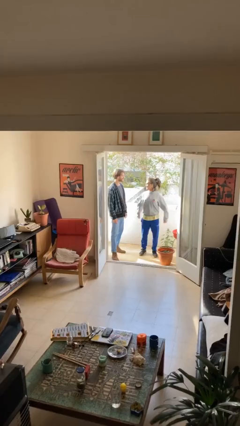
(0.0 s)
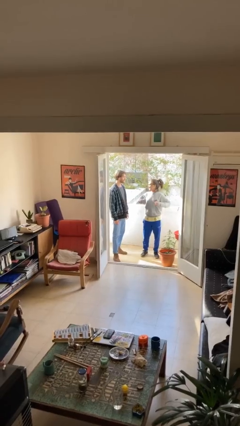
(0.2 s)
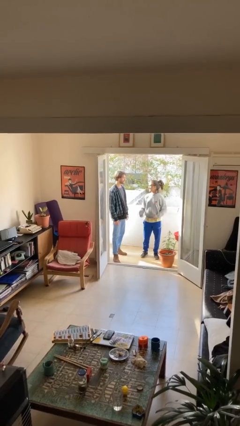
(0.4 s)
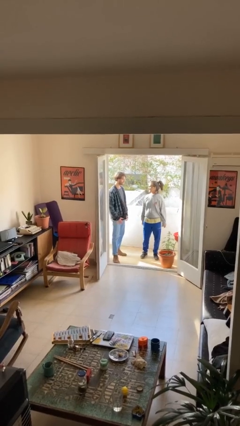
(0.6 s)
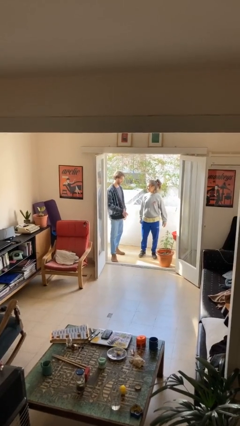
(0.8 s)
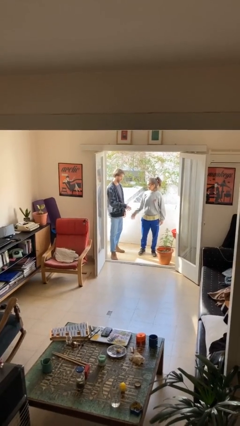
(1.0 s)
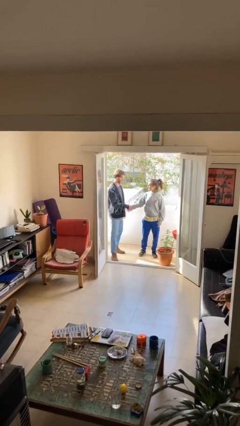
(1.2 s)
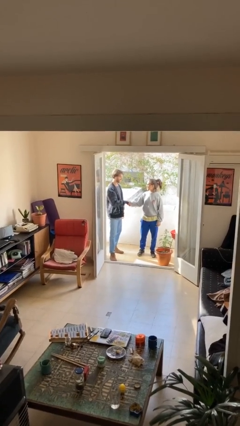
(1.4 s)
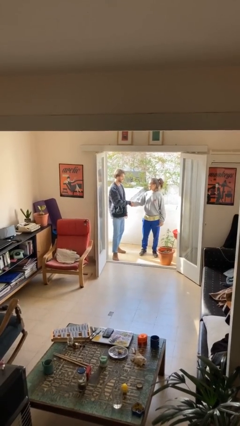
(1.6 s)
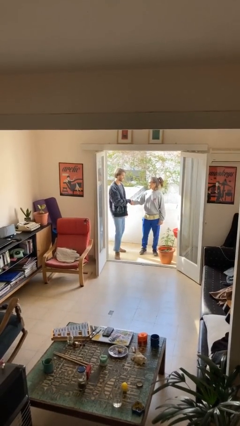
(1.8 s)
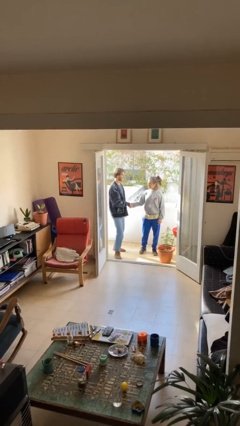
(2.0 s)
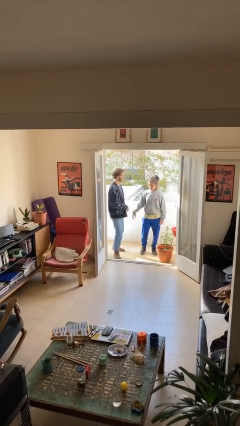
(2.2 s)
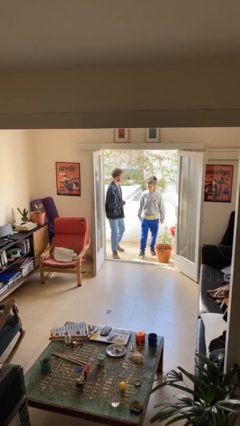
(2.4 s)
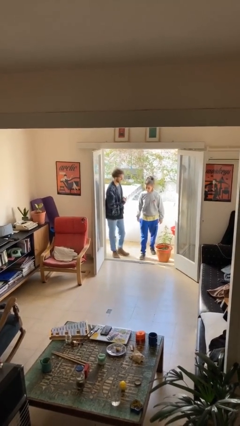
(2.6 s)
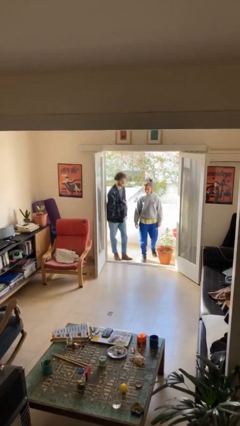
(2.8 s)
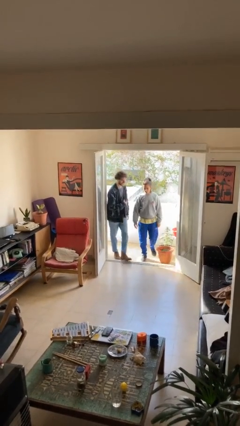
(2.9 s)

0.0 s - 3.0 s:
person shakes hand

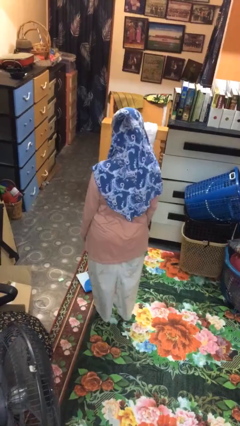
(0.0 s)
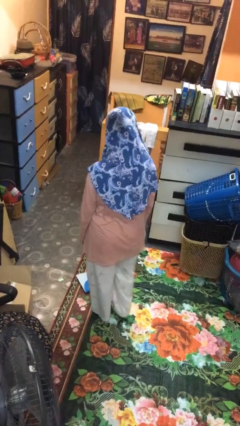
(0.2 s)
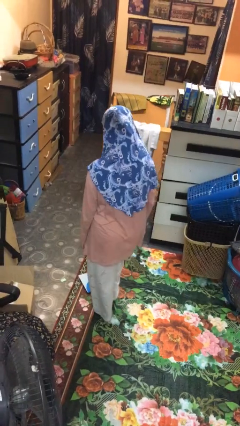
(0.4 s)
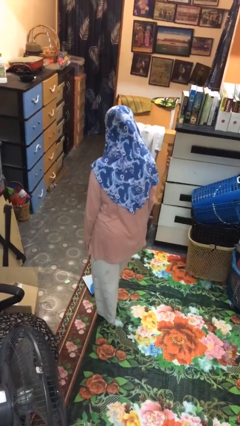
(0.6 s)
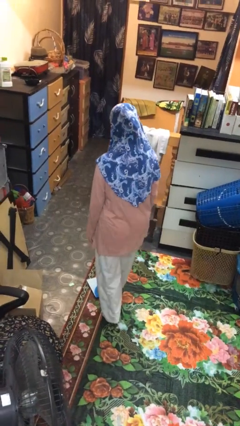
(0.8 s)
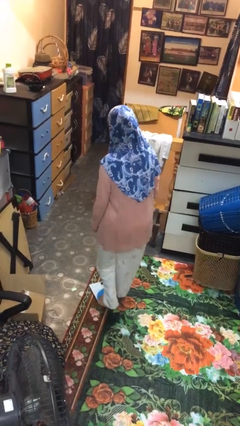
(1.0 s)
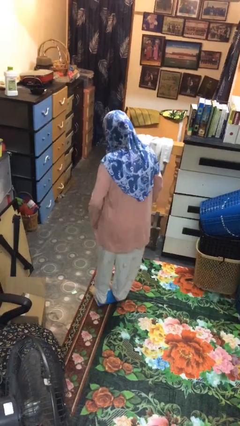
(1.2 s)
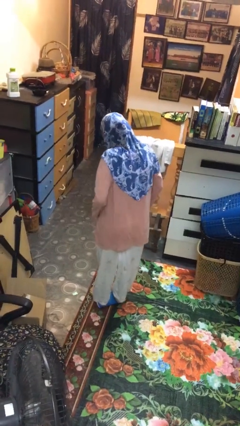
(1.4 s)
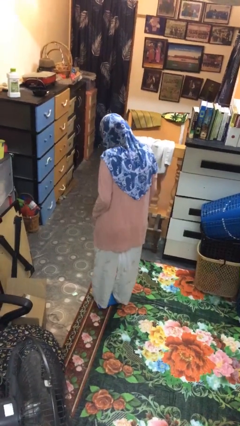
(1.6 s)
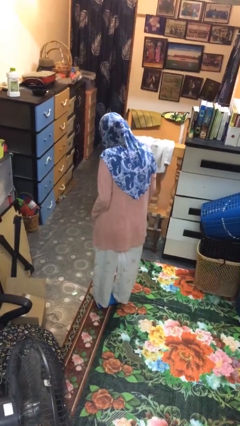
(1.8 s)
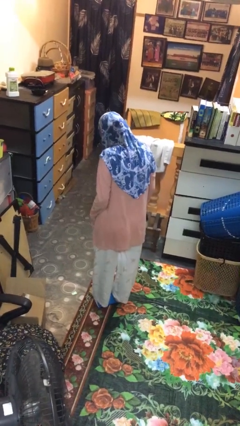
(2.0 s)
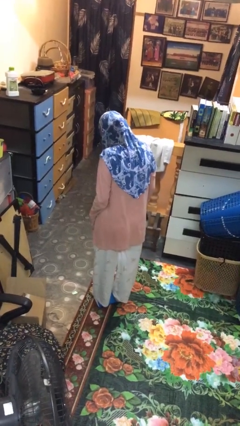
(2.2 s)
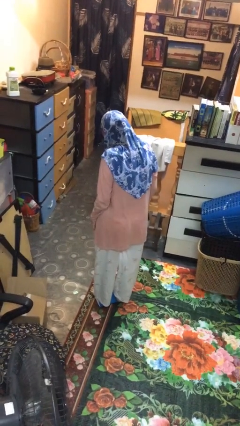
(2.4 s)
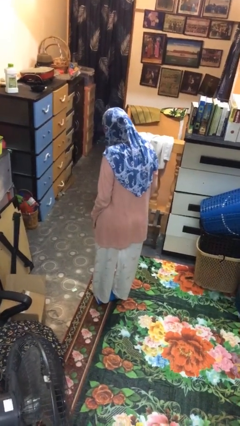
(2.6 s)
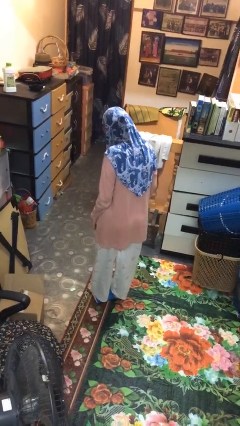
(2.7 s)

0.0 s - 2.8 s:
person uses bodyweight scale

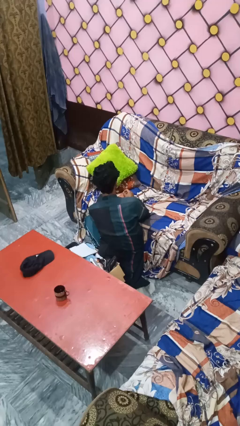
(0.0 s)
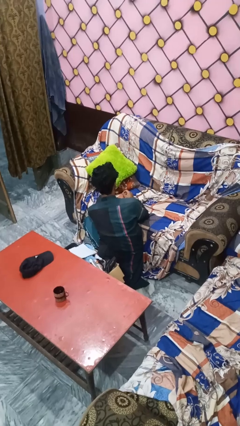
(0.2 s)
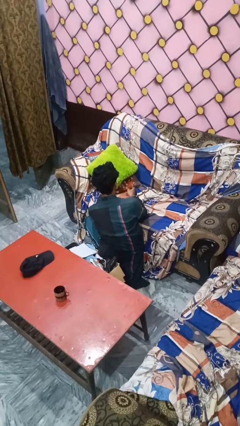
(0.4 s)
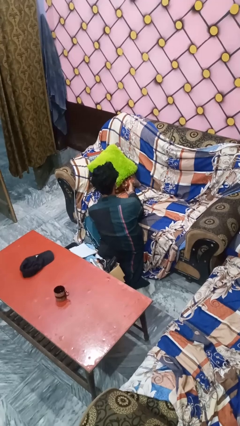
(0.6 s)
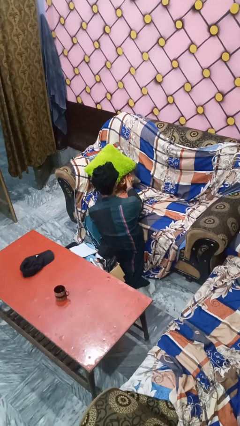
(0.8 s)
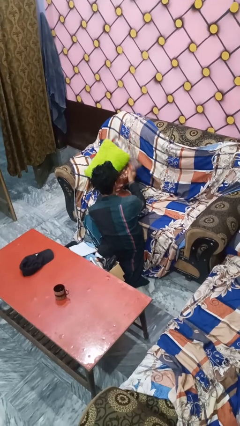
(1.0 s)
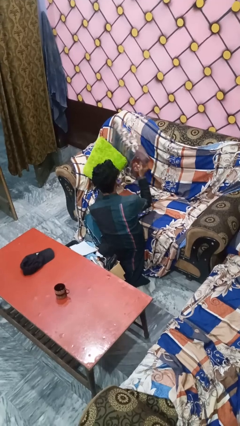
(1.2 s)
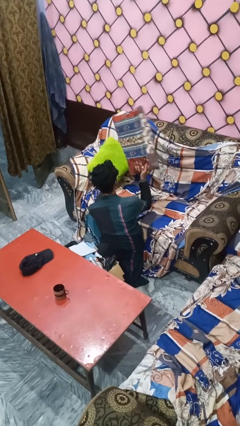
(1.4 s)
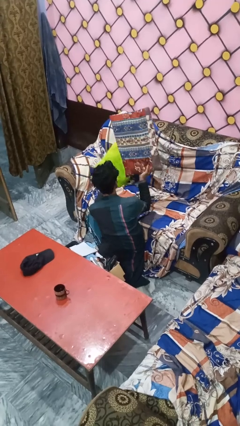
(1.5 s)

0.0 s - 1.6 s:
person searches in couch

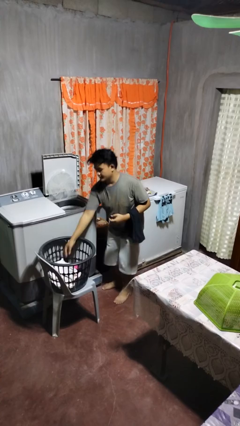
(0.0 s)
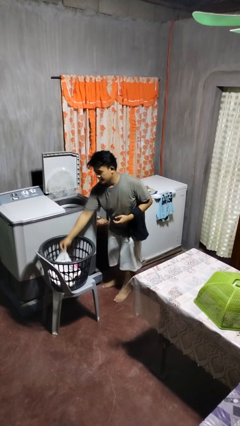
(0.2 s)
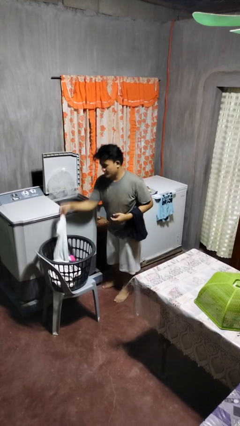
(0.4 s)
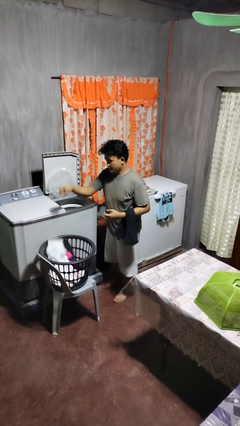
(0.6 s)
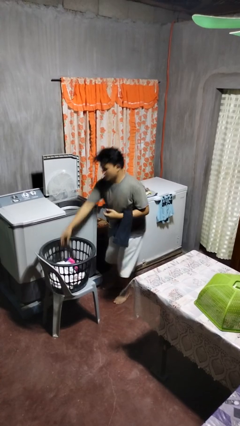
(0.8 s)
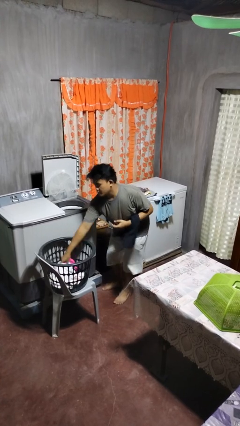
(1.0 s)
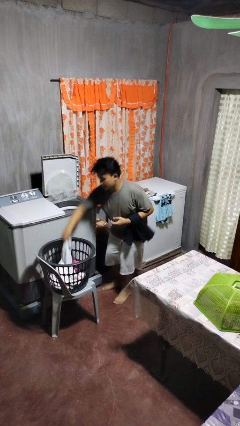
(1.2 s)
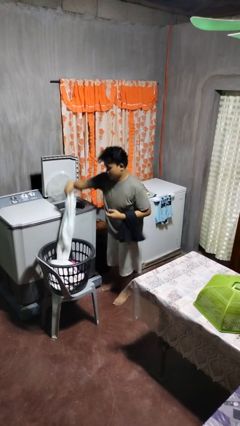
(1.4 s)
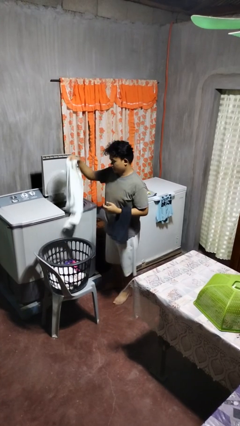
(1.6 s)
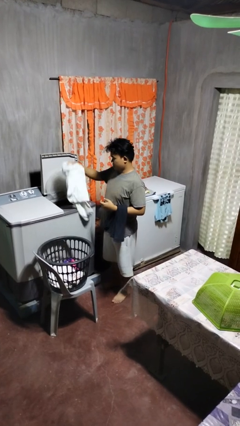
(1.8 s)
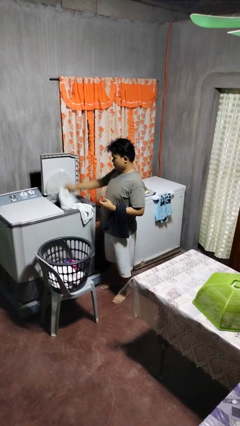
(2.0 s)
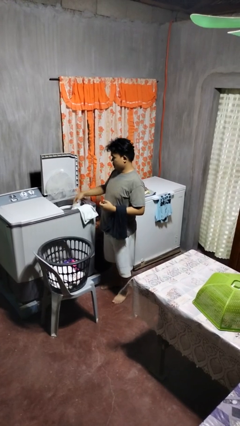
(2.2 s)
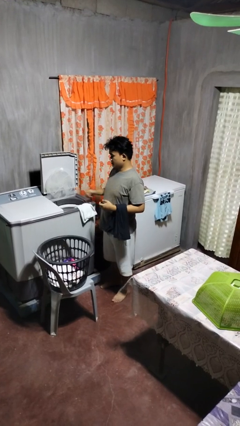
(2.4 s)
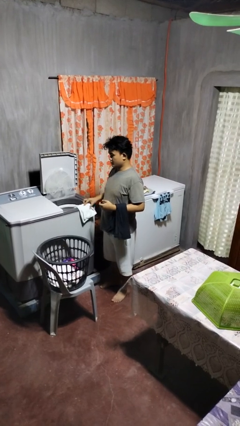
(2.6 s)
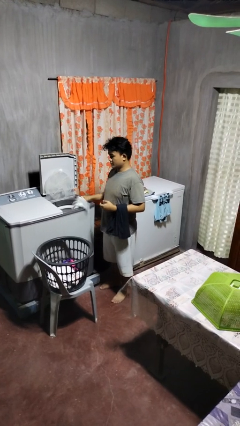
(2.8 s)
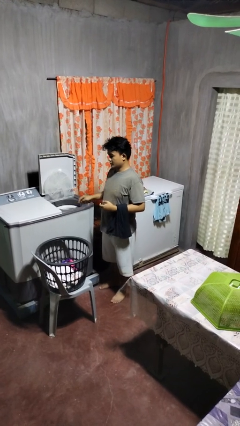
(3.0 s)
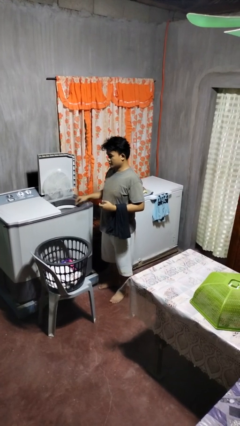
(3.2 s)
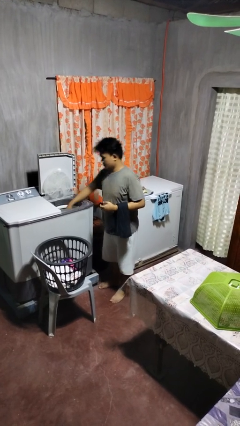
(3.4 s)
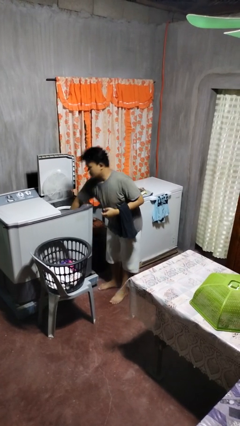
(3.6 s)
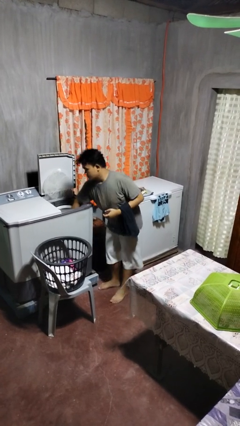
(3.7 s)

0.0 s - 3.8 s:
person loads dryer

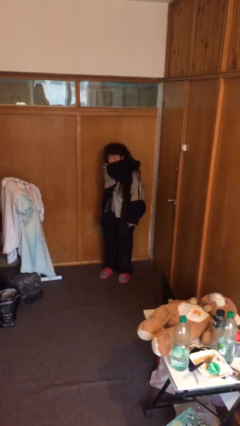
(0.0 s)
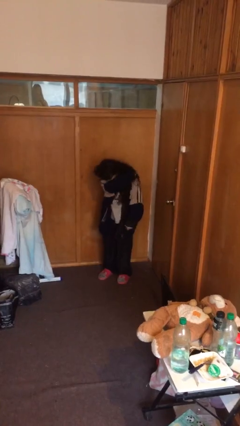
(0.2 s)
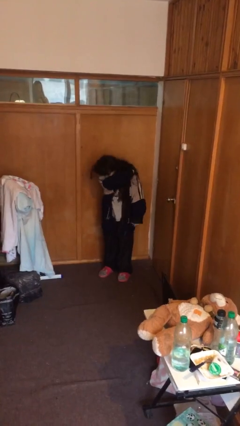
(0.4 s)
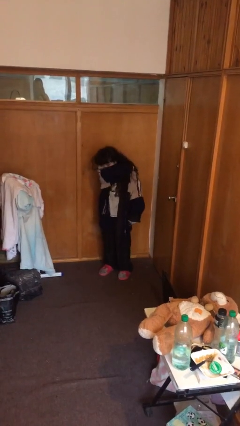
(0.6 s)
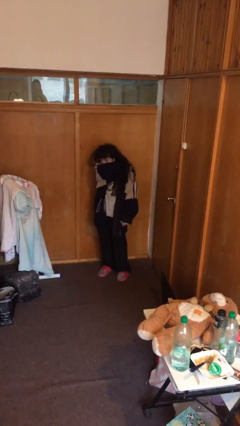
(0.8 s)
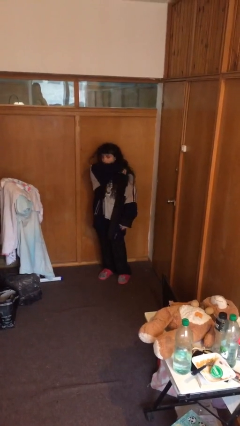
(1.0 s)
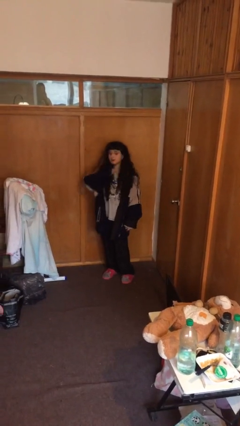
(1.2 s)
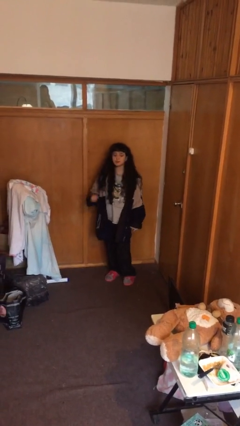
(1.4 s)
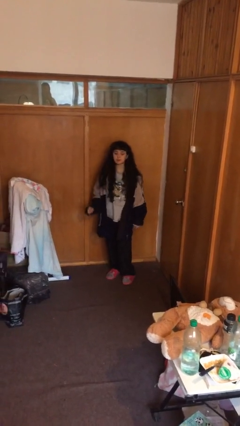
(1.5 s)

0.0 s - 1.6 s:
person sneezes into arm

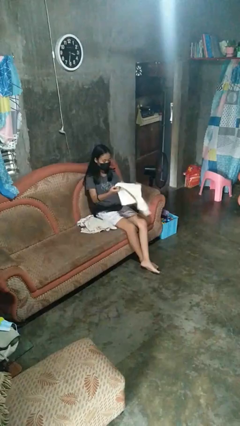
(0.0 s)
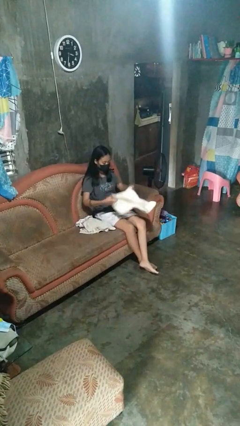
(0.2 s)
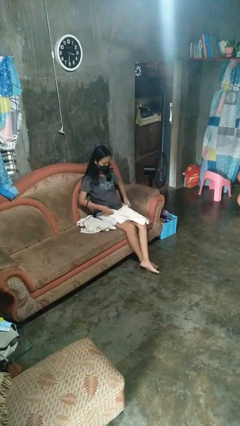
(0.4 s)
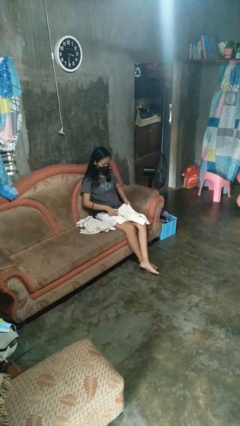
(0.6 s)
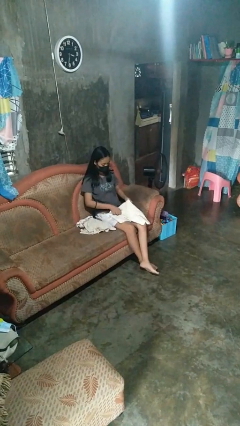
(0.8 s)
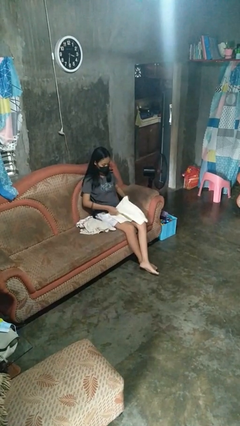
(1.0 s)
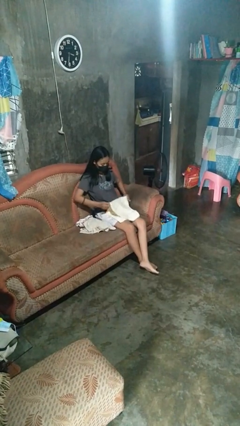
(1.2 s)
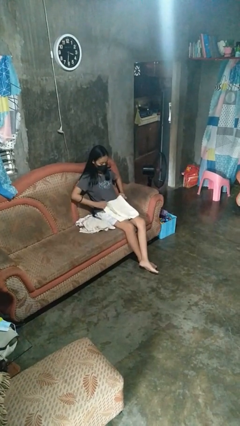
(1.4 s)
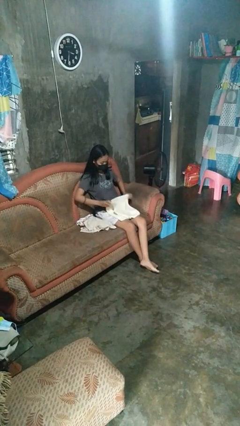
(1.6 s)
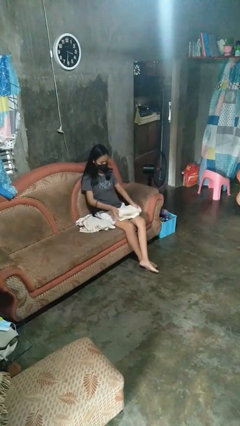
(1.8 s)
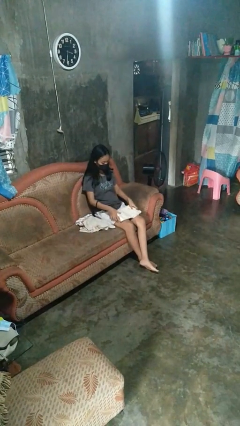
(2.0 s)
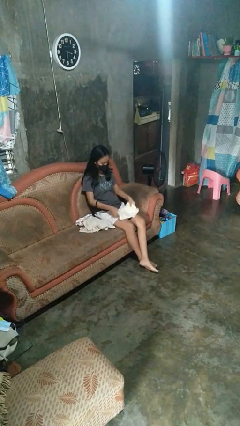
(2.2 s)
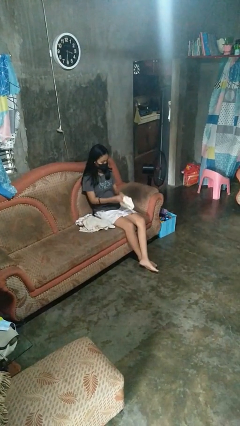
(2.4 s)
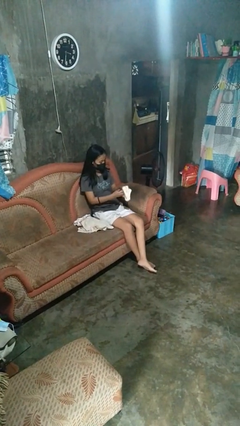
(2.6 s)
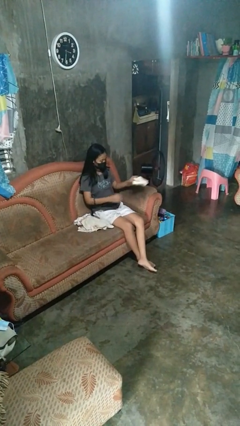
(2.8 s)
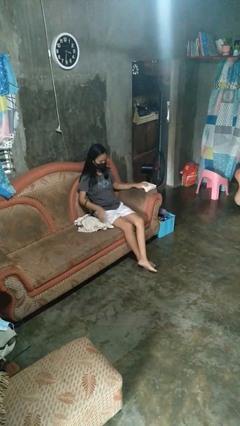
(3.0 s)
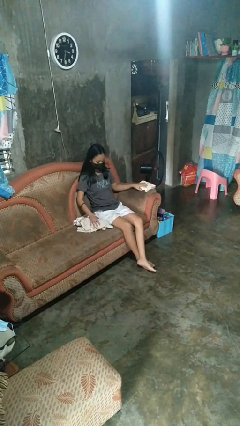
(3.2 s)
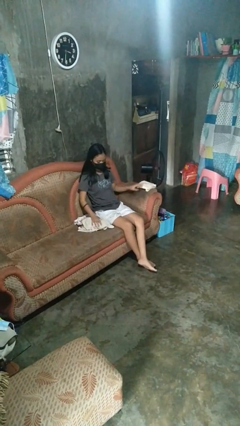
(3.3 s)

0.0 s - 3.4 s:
person folds towel

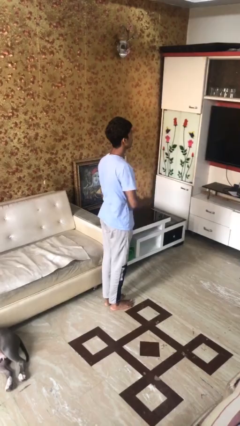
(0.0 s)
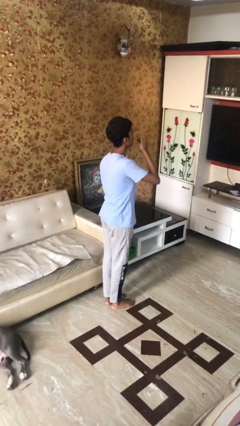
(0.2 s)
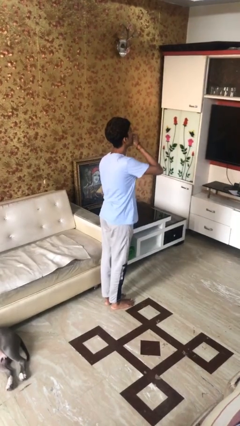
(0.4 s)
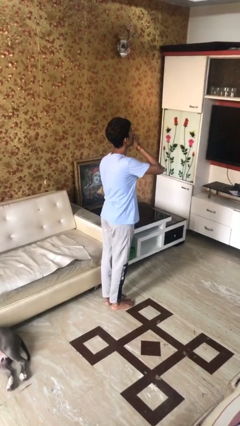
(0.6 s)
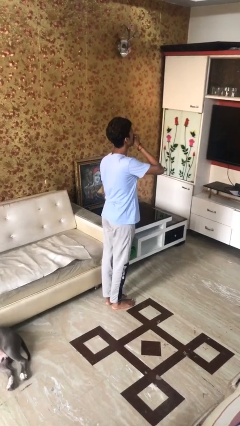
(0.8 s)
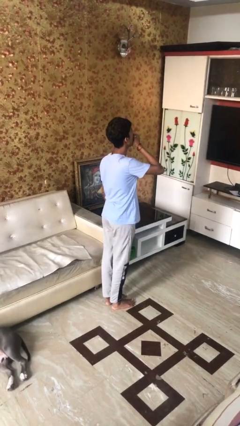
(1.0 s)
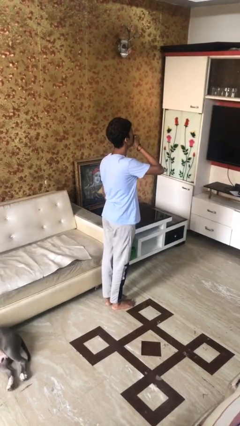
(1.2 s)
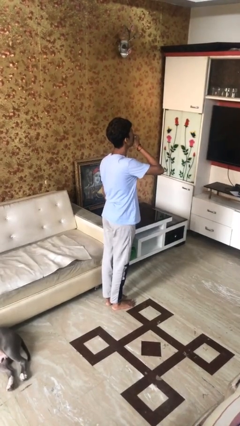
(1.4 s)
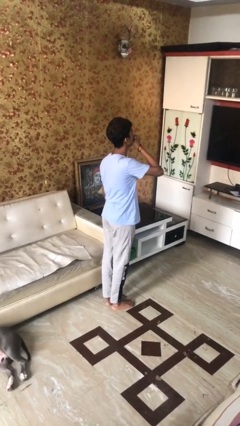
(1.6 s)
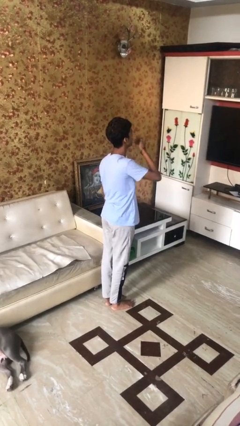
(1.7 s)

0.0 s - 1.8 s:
person yawns
